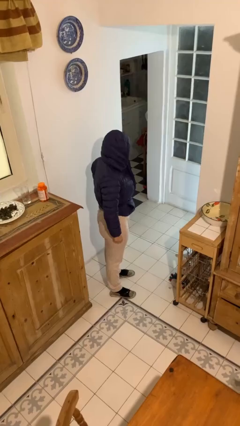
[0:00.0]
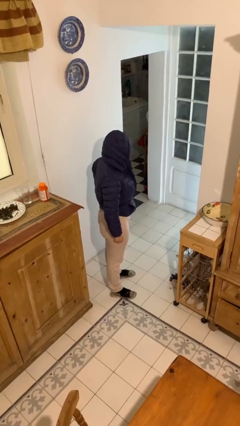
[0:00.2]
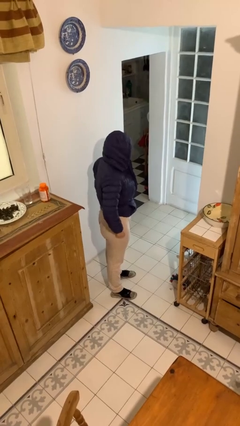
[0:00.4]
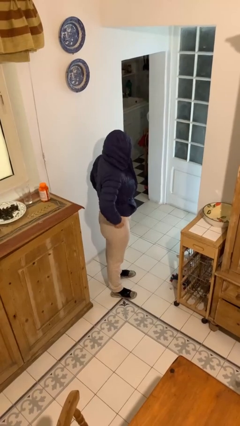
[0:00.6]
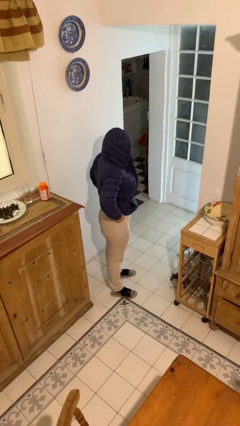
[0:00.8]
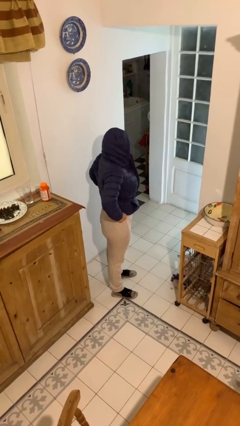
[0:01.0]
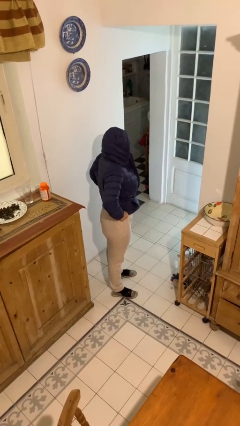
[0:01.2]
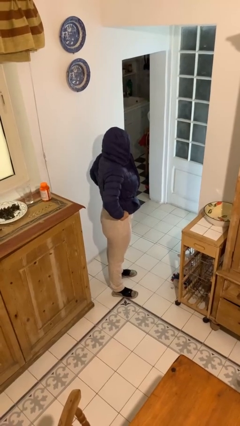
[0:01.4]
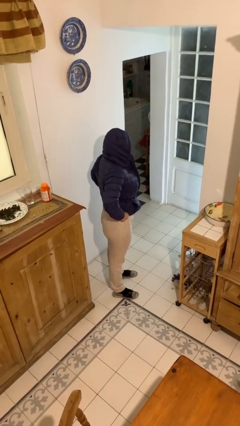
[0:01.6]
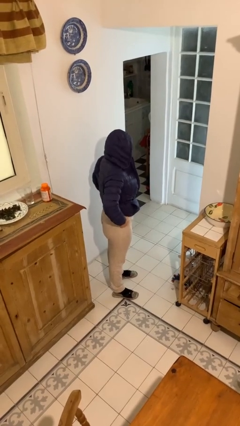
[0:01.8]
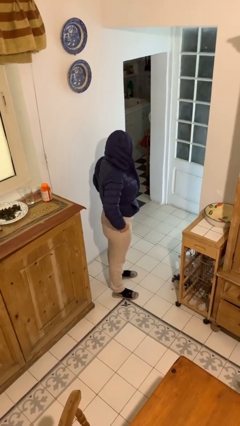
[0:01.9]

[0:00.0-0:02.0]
person hikes up pants

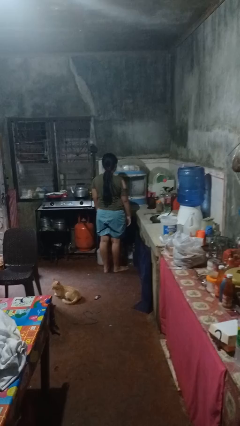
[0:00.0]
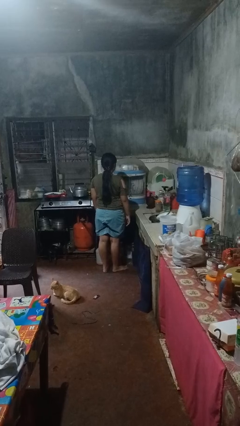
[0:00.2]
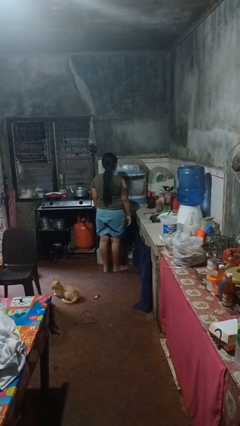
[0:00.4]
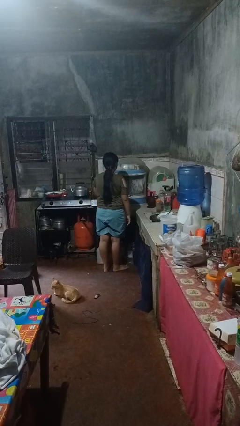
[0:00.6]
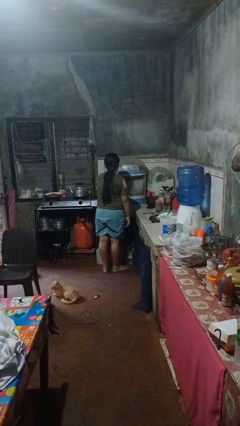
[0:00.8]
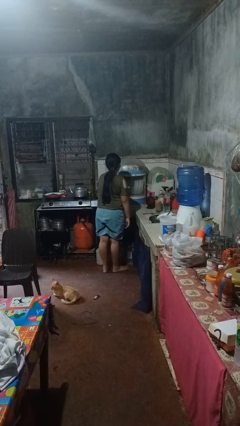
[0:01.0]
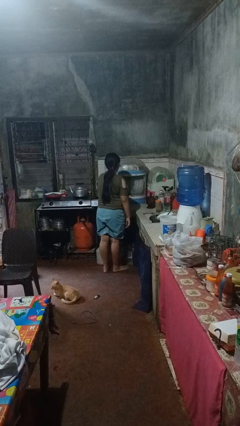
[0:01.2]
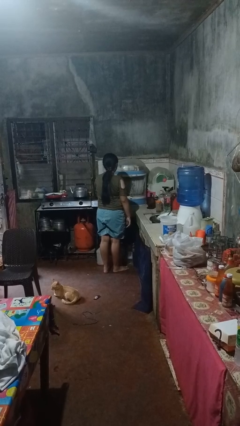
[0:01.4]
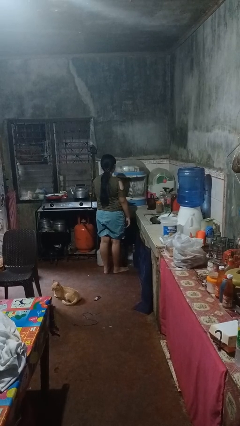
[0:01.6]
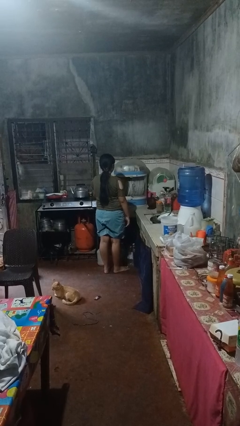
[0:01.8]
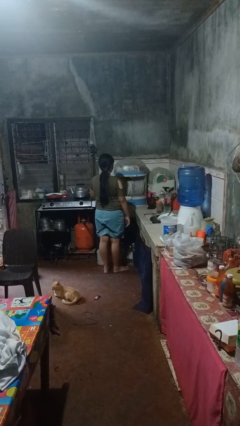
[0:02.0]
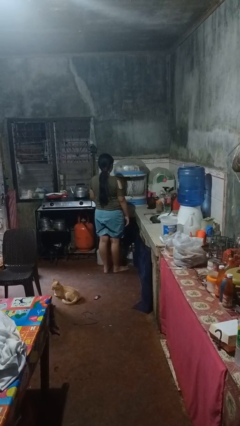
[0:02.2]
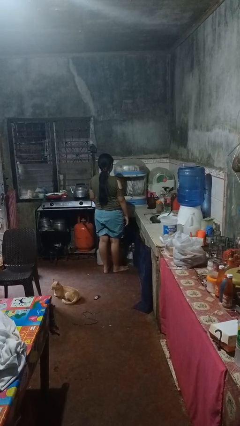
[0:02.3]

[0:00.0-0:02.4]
person opens kitchen drawer

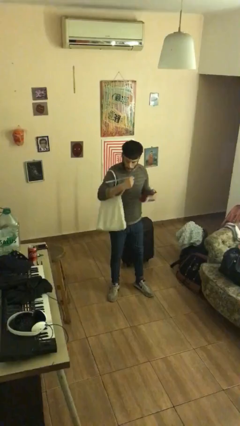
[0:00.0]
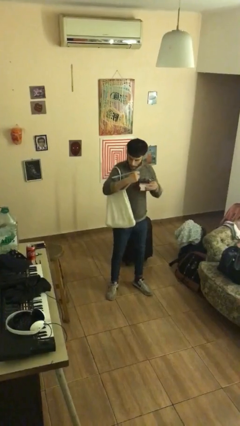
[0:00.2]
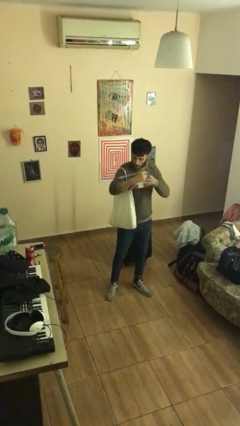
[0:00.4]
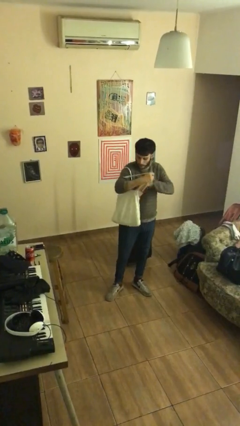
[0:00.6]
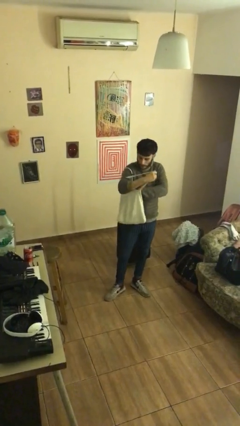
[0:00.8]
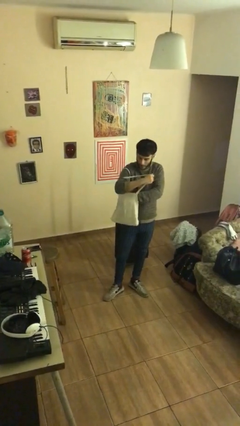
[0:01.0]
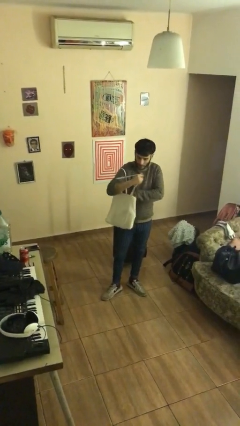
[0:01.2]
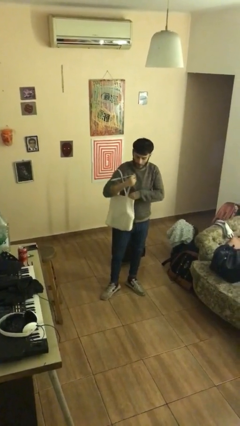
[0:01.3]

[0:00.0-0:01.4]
person puts object into purse

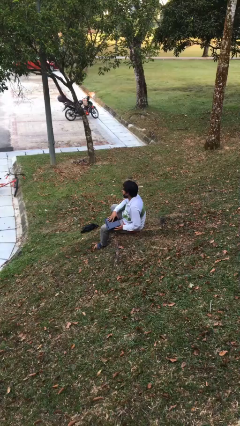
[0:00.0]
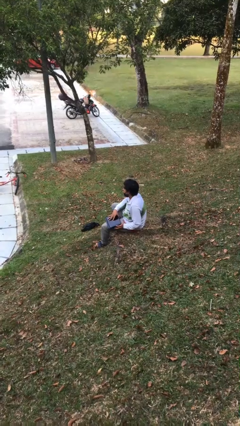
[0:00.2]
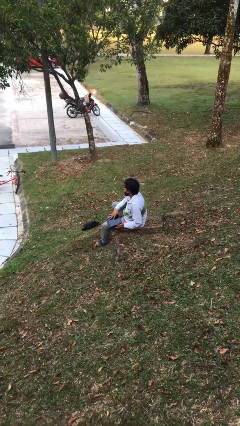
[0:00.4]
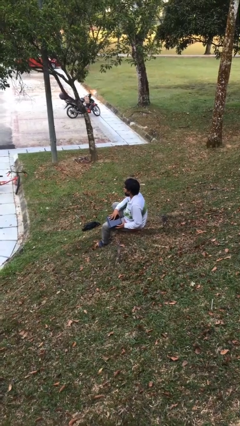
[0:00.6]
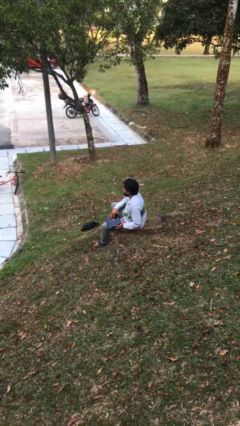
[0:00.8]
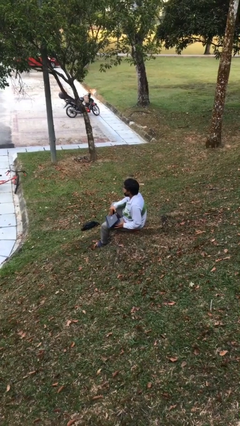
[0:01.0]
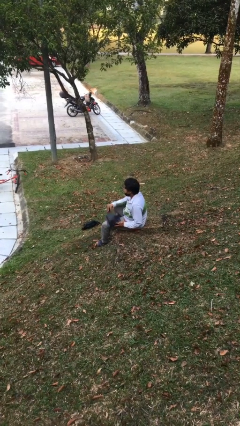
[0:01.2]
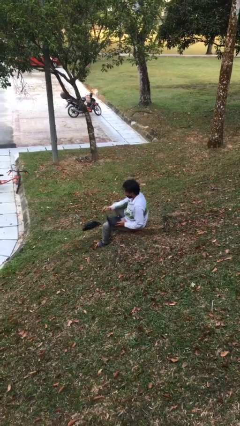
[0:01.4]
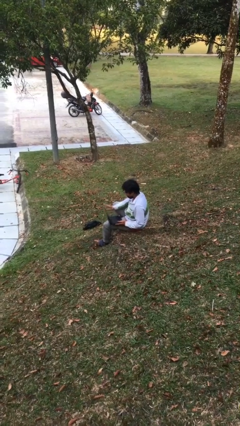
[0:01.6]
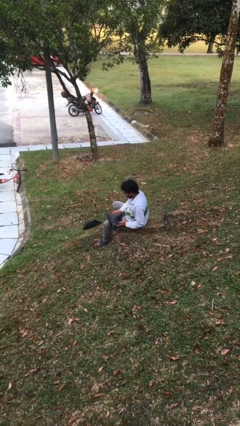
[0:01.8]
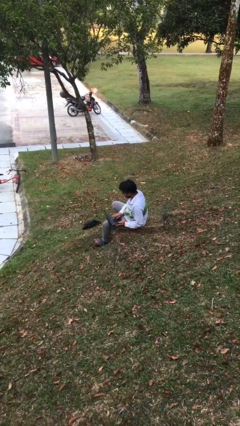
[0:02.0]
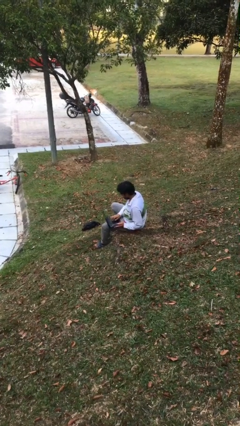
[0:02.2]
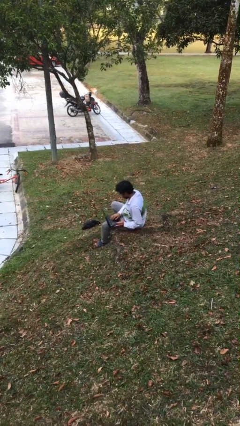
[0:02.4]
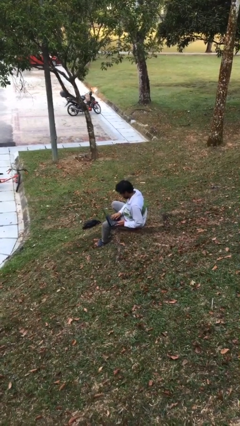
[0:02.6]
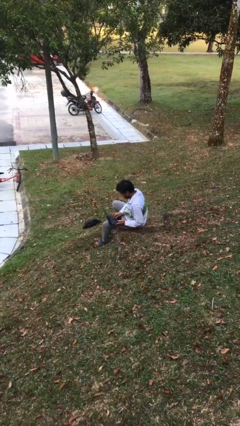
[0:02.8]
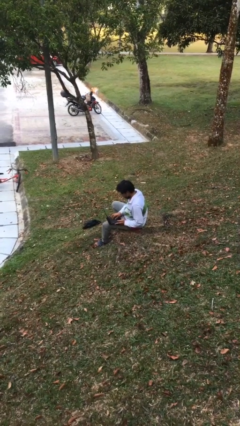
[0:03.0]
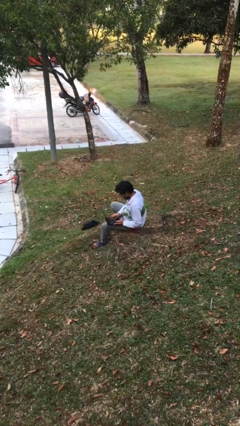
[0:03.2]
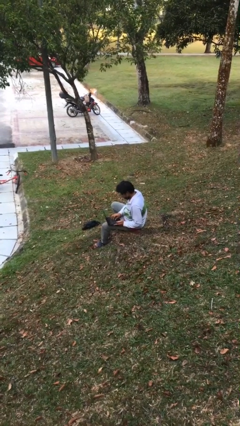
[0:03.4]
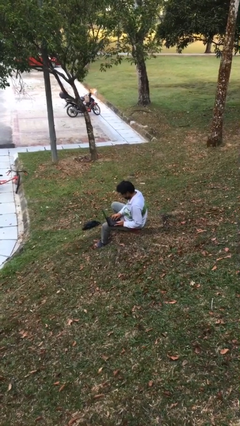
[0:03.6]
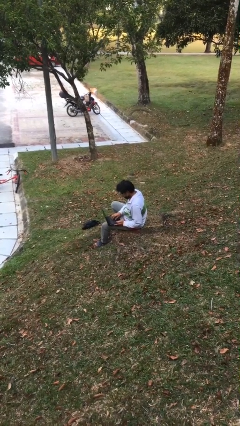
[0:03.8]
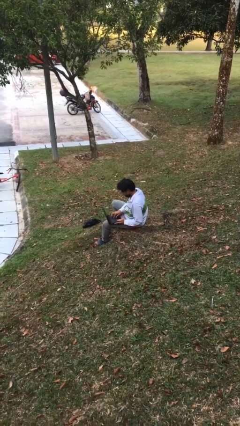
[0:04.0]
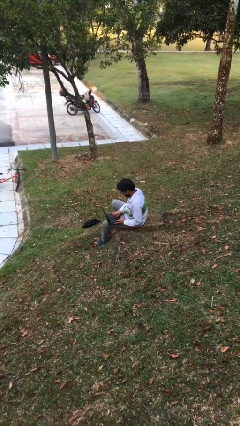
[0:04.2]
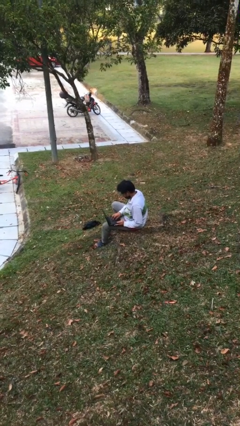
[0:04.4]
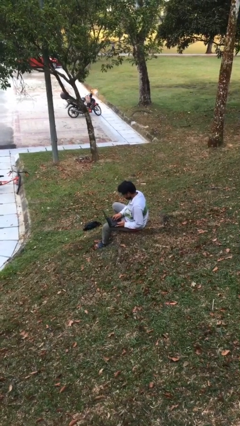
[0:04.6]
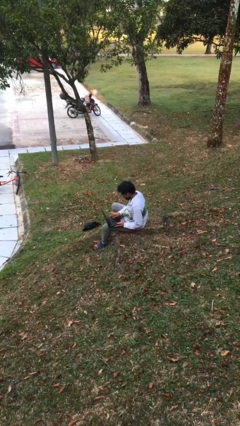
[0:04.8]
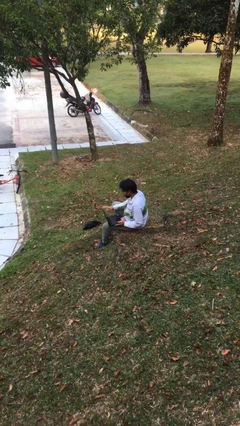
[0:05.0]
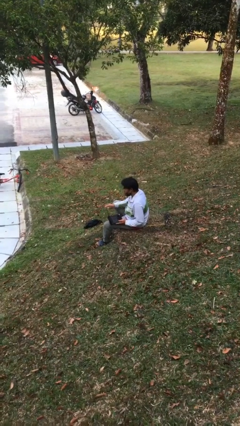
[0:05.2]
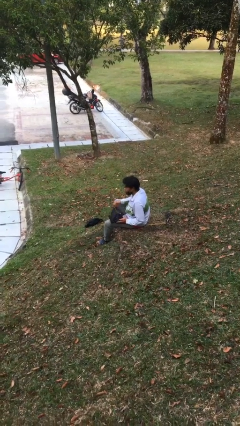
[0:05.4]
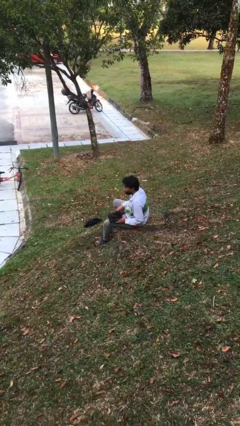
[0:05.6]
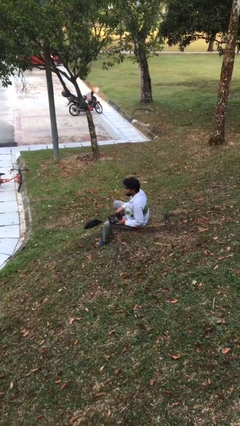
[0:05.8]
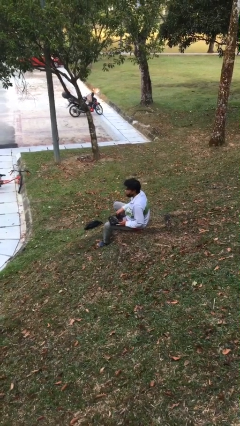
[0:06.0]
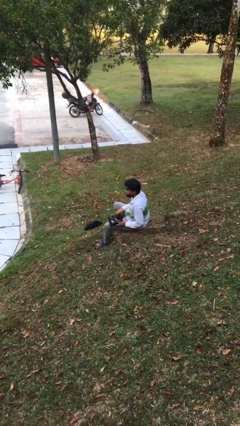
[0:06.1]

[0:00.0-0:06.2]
person interacts with laptop

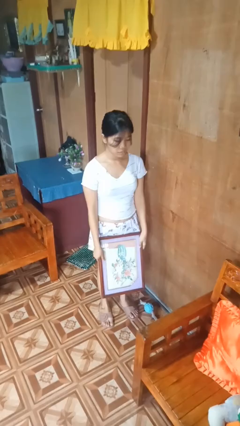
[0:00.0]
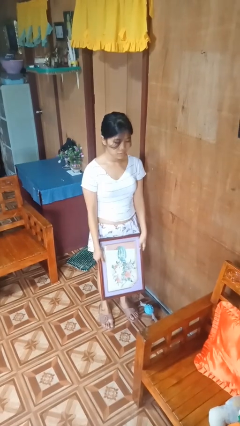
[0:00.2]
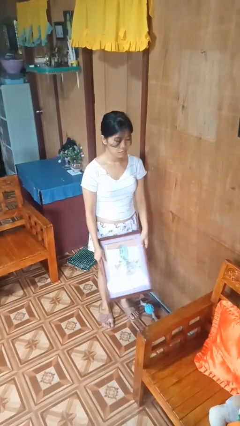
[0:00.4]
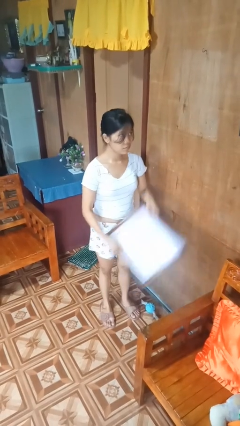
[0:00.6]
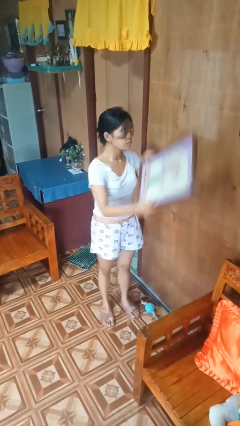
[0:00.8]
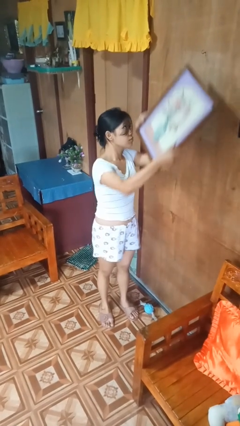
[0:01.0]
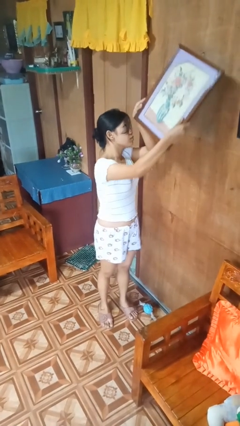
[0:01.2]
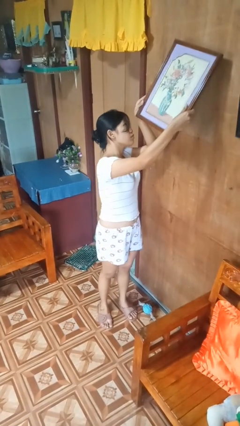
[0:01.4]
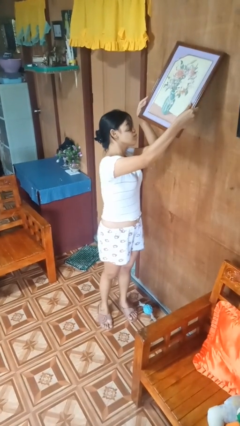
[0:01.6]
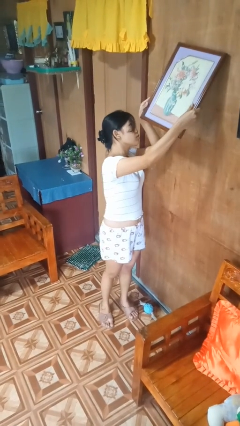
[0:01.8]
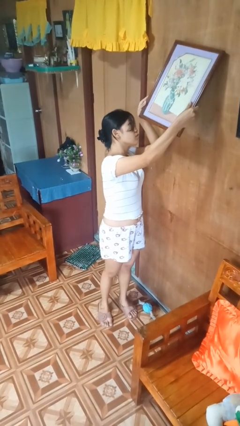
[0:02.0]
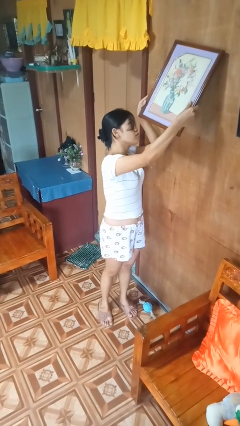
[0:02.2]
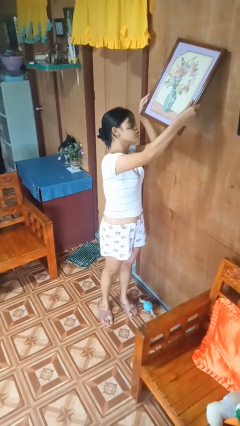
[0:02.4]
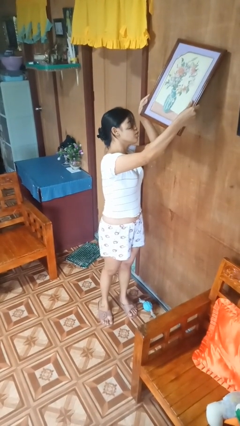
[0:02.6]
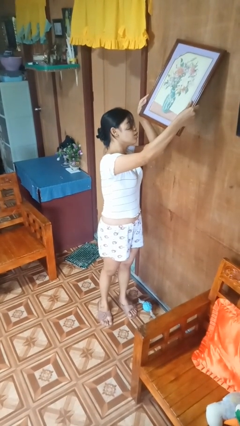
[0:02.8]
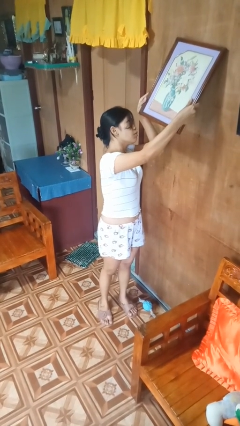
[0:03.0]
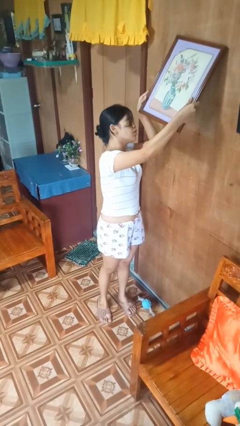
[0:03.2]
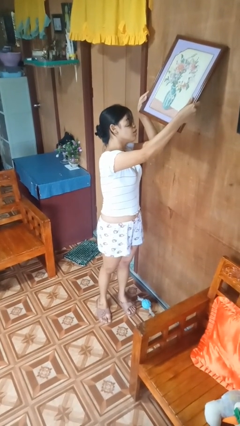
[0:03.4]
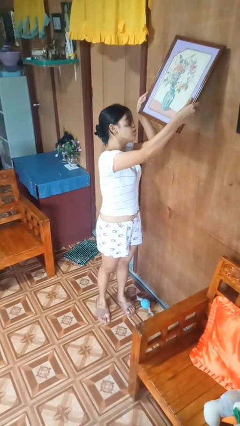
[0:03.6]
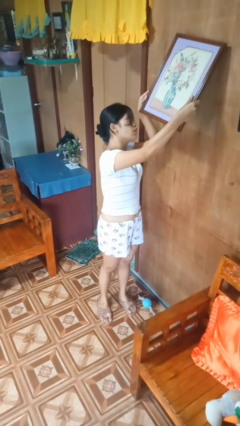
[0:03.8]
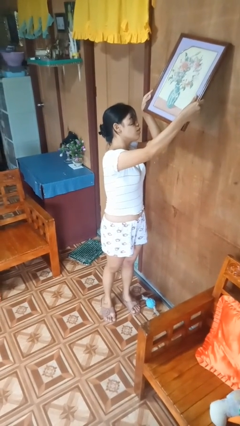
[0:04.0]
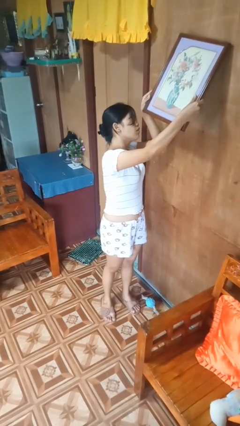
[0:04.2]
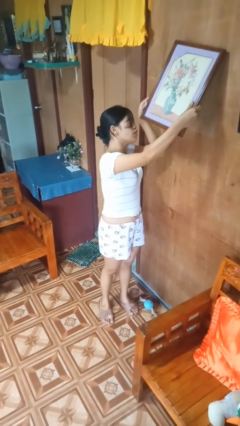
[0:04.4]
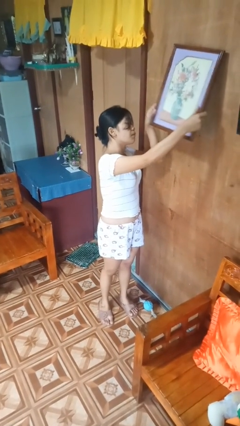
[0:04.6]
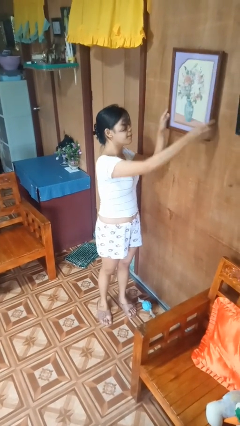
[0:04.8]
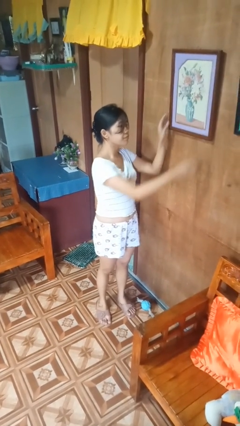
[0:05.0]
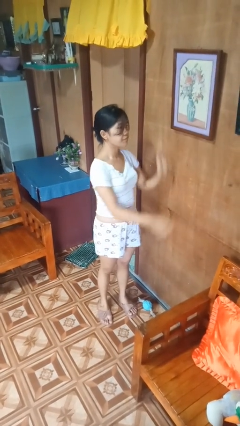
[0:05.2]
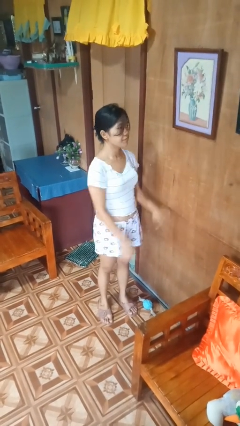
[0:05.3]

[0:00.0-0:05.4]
person puts up picture frame

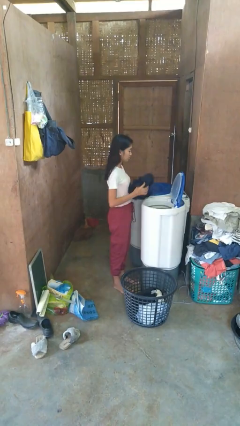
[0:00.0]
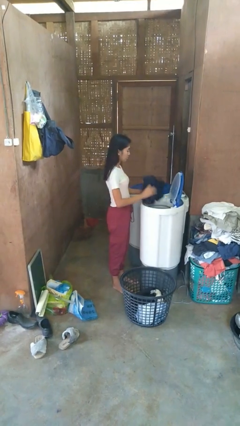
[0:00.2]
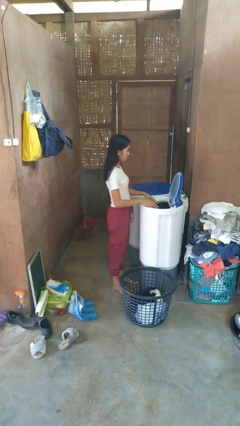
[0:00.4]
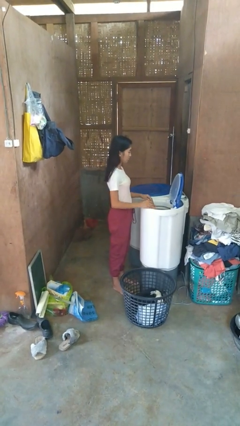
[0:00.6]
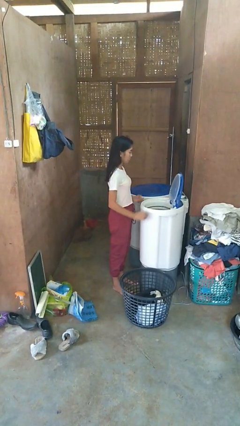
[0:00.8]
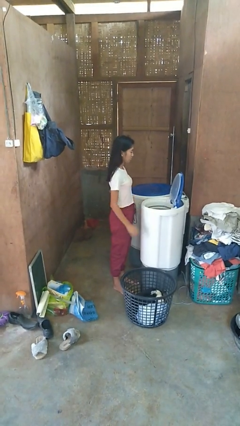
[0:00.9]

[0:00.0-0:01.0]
person loads dryer
